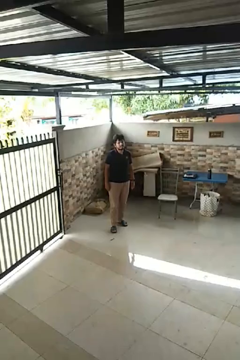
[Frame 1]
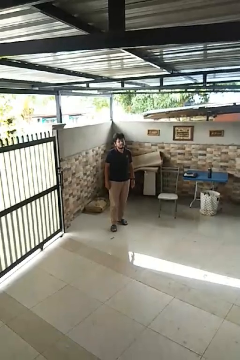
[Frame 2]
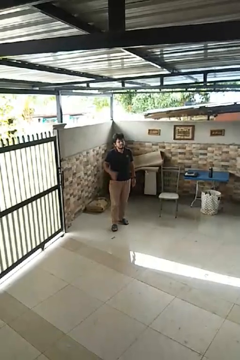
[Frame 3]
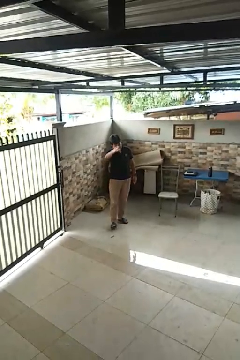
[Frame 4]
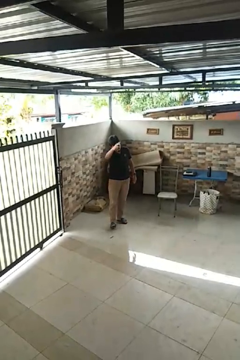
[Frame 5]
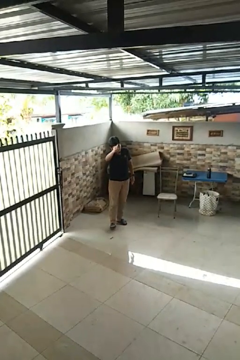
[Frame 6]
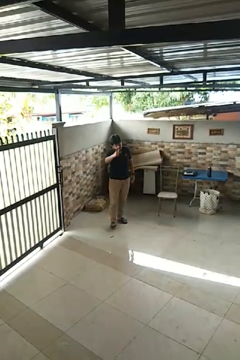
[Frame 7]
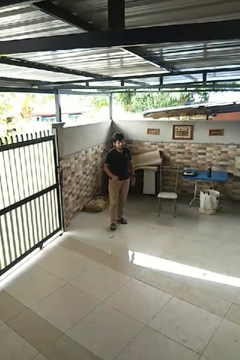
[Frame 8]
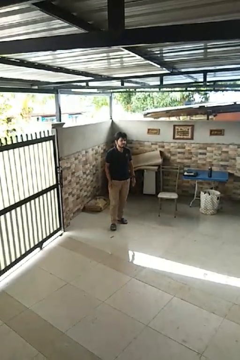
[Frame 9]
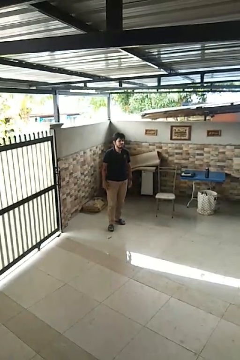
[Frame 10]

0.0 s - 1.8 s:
person gestures come here

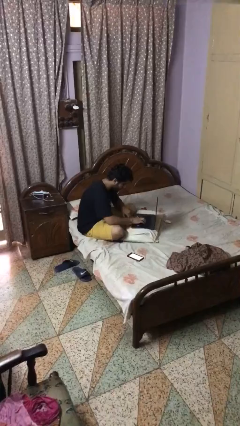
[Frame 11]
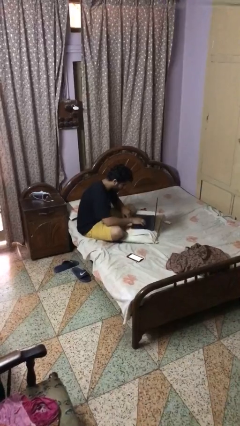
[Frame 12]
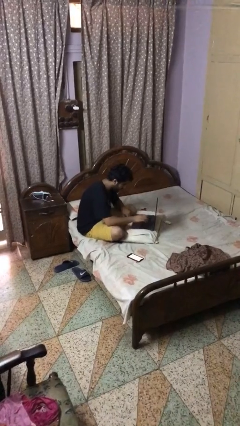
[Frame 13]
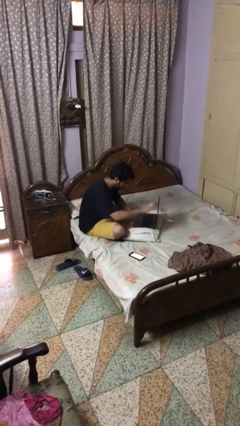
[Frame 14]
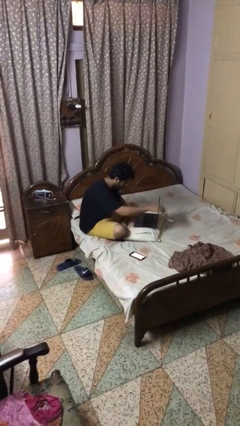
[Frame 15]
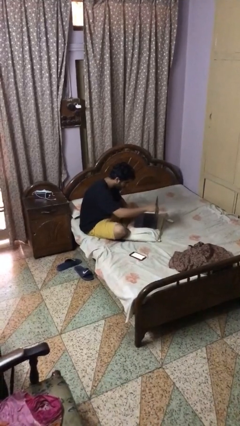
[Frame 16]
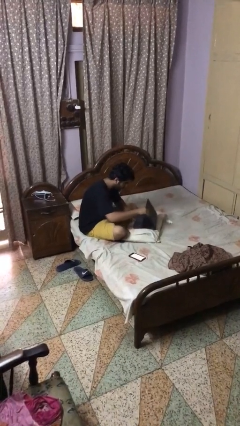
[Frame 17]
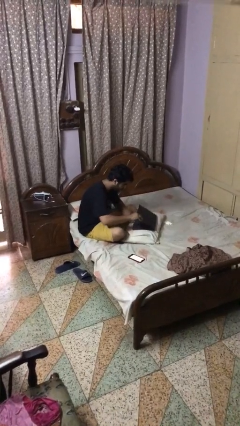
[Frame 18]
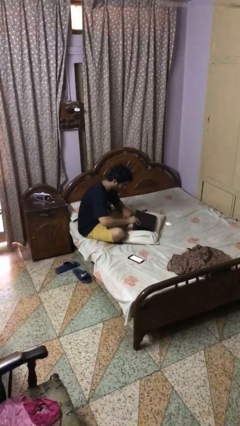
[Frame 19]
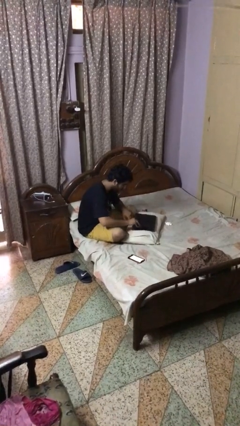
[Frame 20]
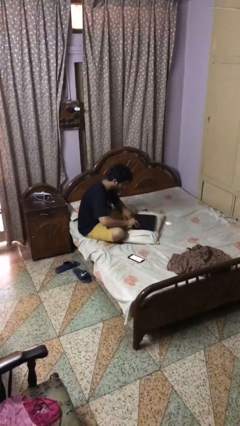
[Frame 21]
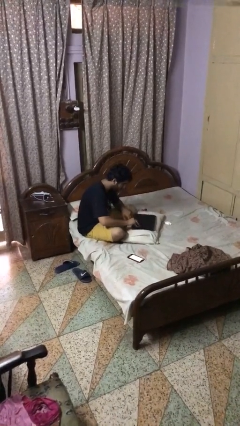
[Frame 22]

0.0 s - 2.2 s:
person closes laptop

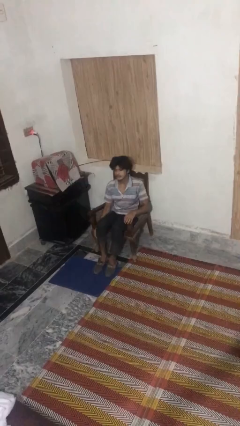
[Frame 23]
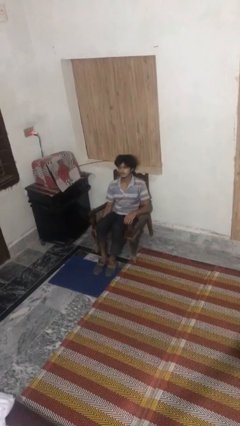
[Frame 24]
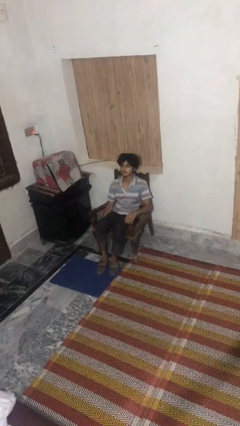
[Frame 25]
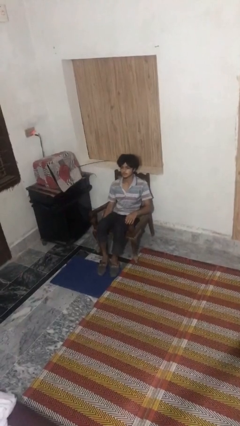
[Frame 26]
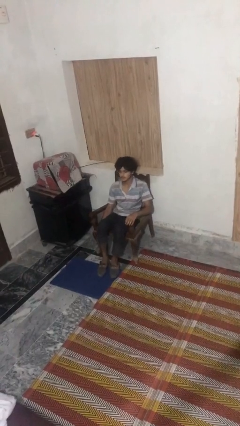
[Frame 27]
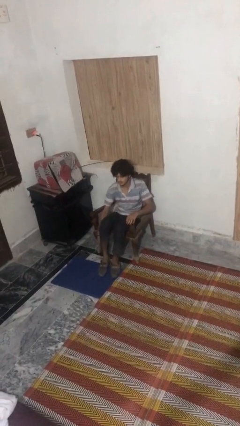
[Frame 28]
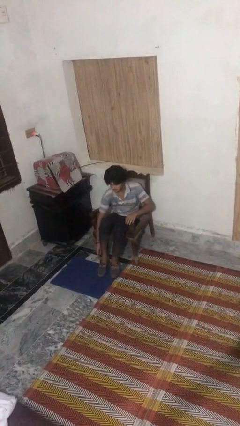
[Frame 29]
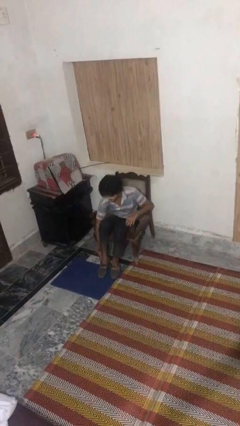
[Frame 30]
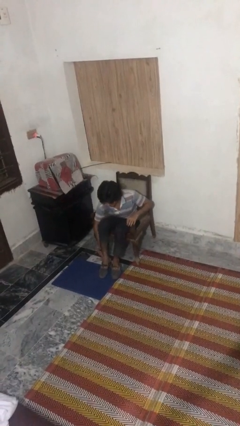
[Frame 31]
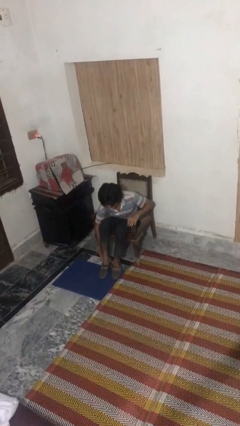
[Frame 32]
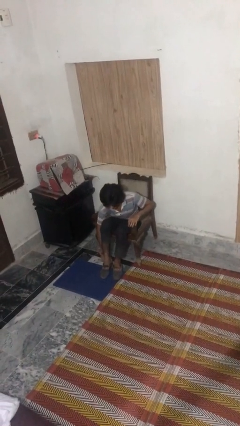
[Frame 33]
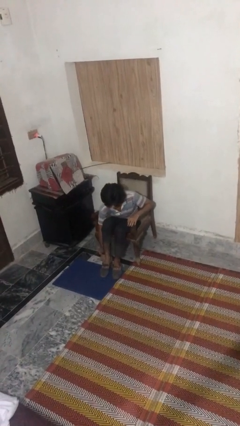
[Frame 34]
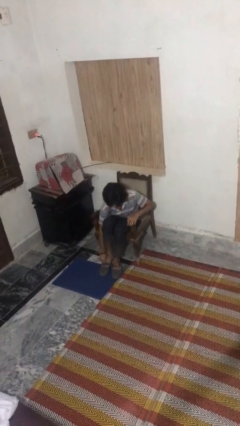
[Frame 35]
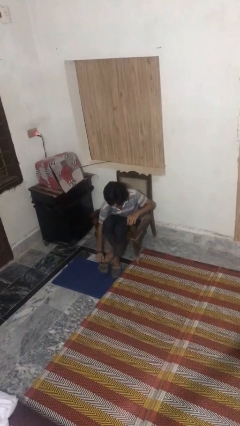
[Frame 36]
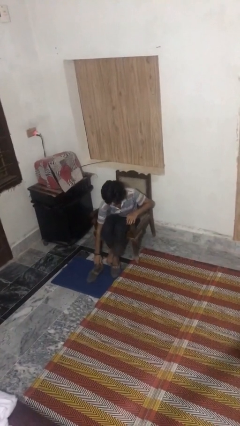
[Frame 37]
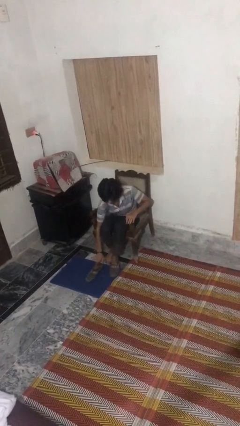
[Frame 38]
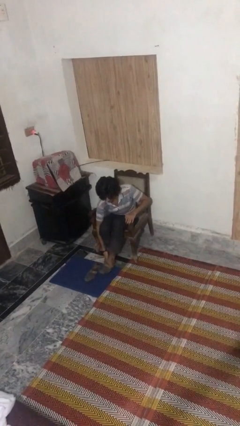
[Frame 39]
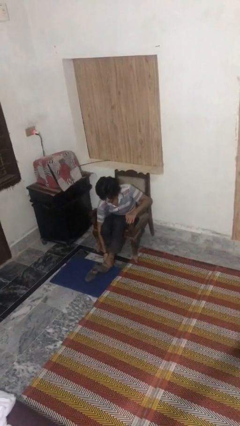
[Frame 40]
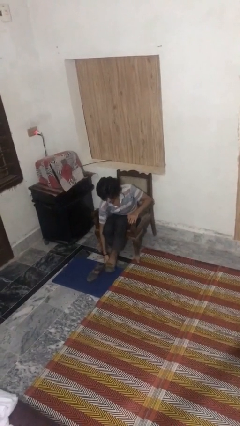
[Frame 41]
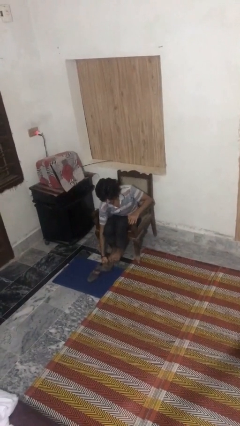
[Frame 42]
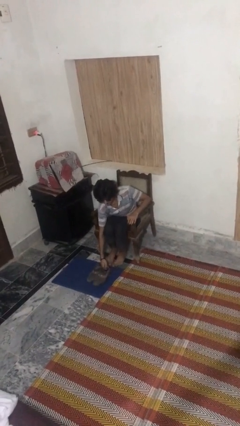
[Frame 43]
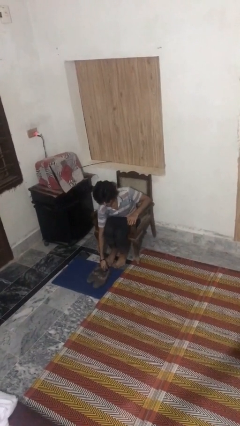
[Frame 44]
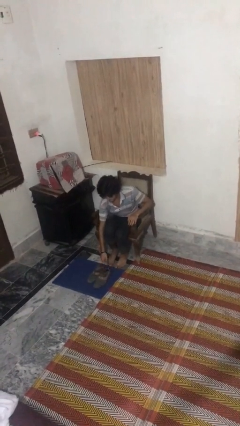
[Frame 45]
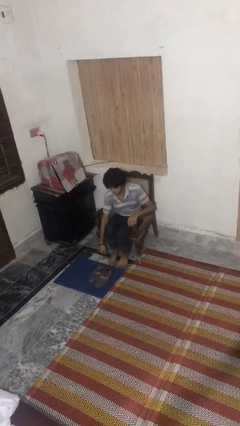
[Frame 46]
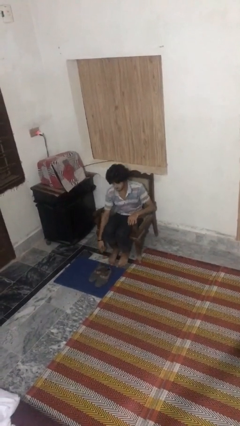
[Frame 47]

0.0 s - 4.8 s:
person takes off shoes

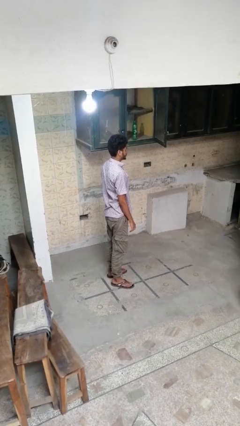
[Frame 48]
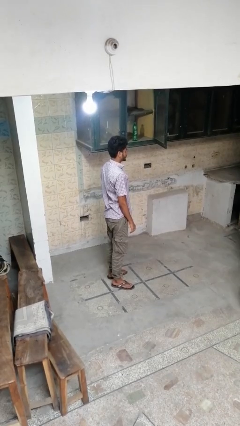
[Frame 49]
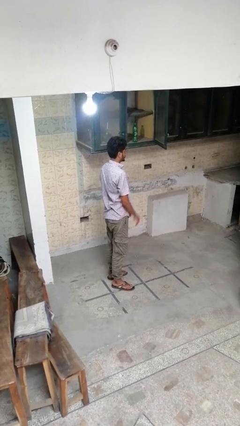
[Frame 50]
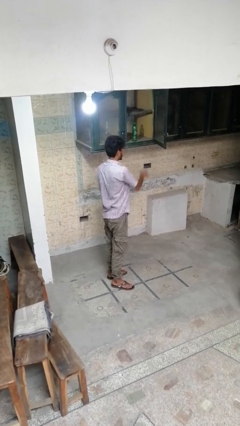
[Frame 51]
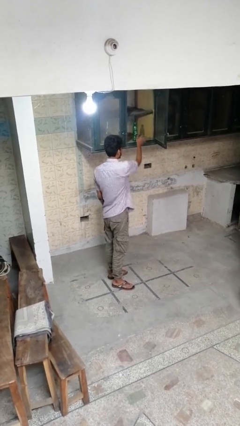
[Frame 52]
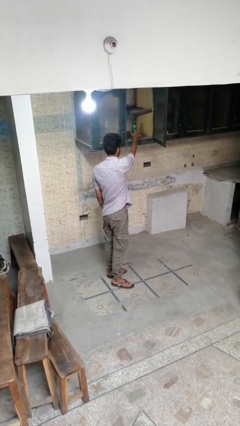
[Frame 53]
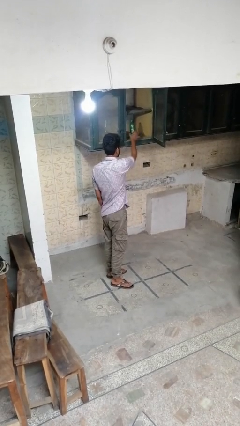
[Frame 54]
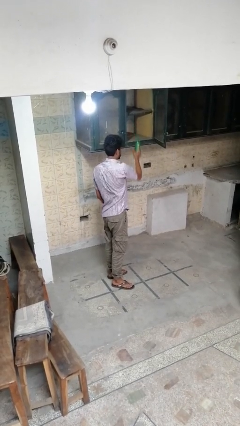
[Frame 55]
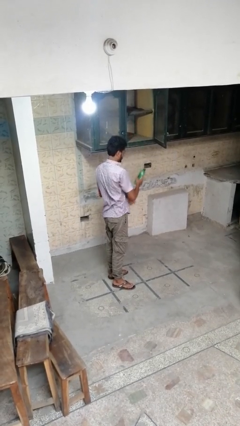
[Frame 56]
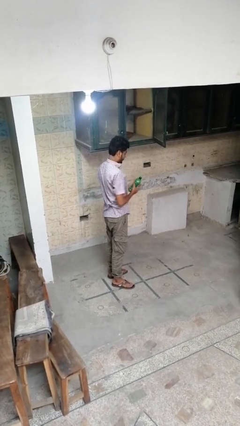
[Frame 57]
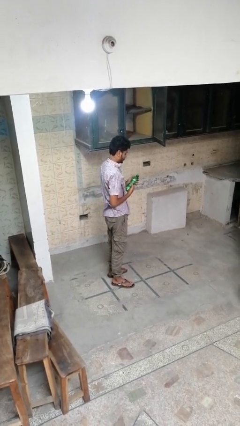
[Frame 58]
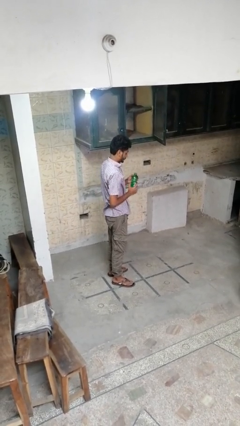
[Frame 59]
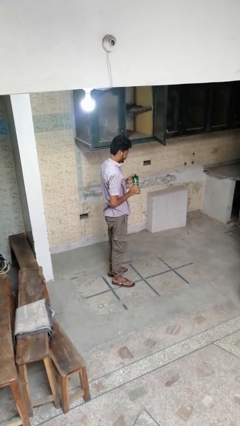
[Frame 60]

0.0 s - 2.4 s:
person picks up object from cabinet

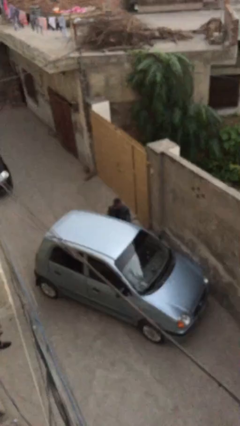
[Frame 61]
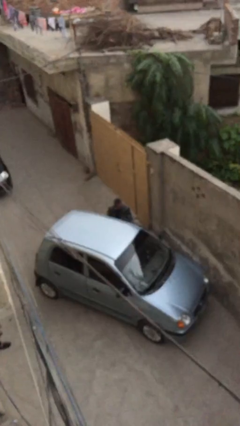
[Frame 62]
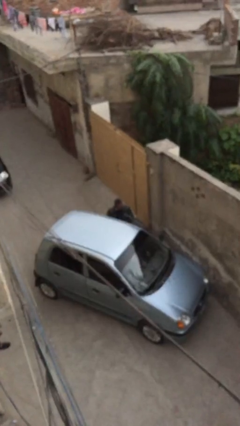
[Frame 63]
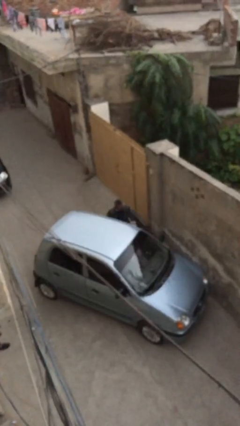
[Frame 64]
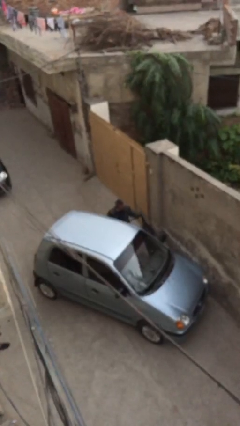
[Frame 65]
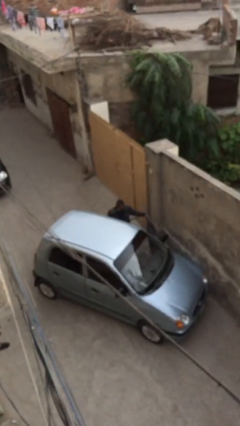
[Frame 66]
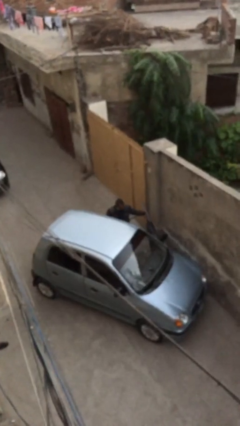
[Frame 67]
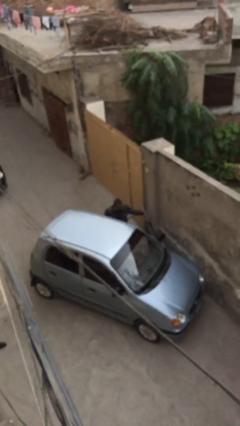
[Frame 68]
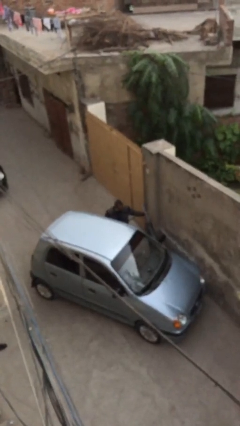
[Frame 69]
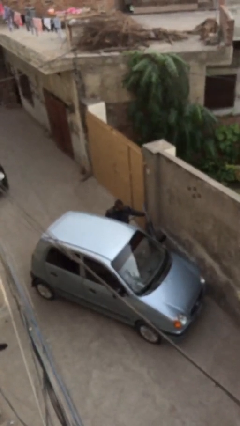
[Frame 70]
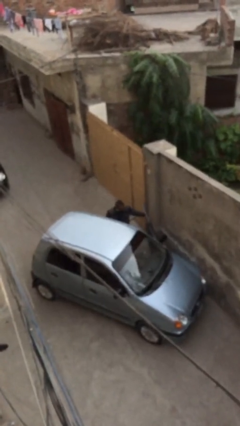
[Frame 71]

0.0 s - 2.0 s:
person opens car door

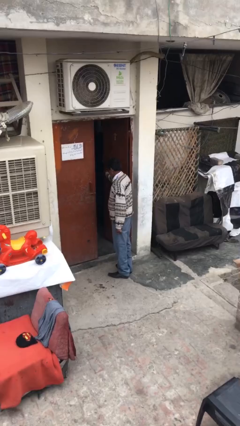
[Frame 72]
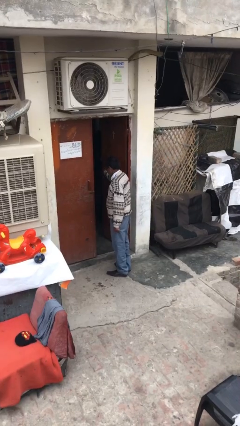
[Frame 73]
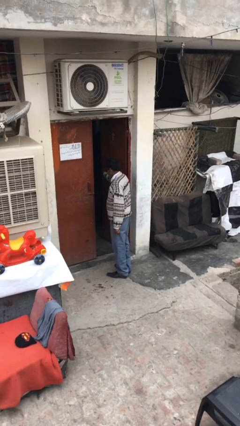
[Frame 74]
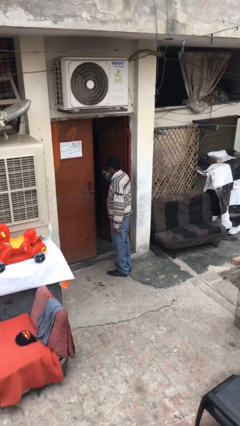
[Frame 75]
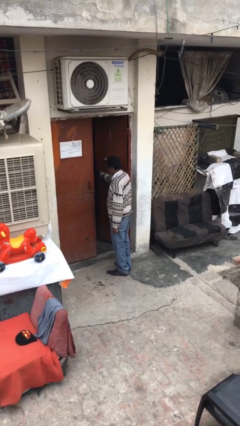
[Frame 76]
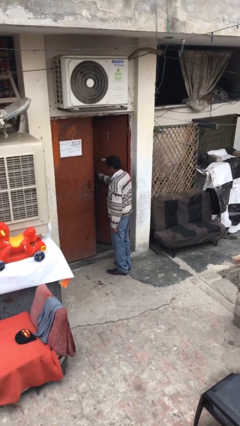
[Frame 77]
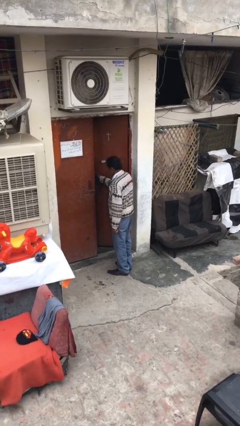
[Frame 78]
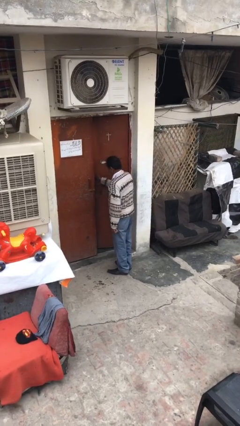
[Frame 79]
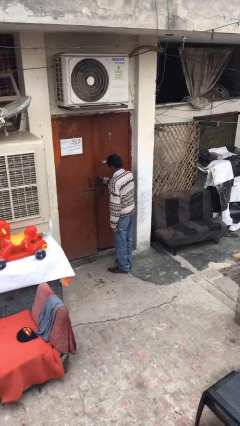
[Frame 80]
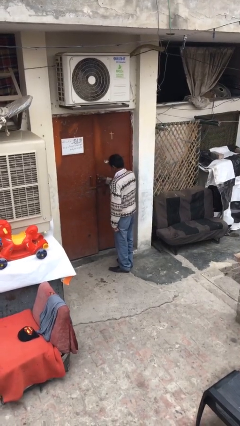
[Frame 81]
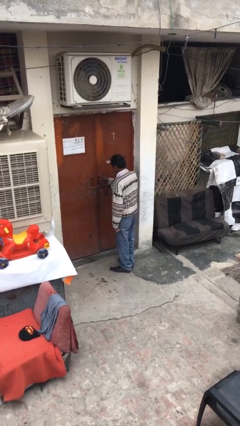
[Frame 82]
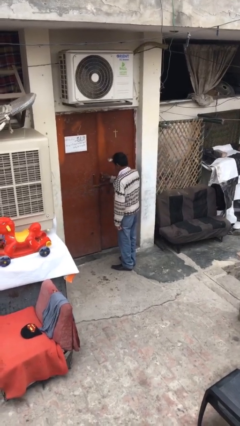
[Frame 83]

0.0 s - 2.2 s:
person closes facility door

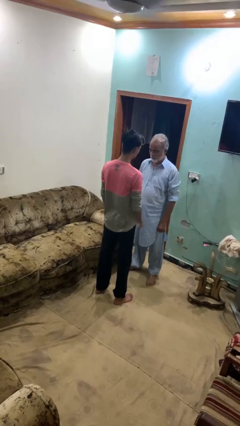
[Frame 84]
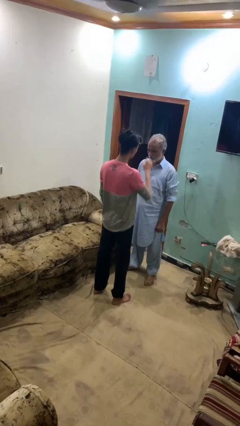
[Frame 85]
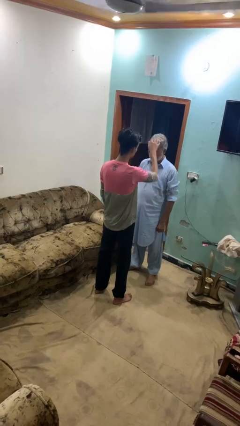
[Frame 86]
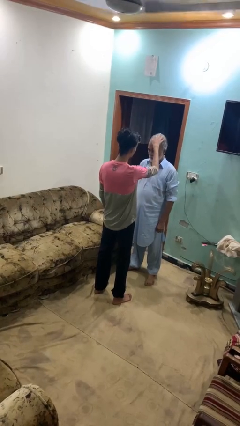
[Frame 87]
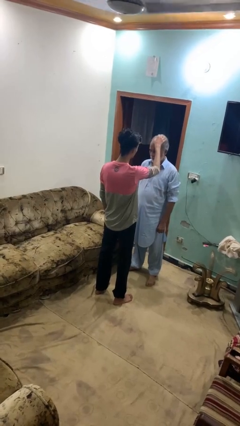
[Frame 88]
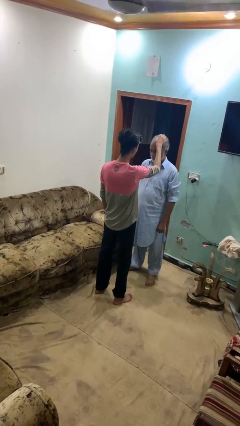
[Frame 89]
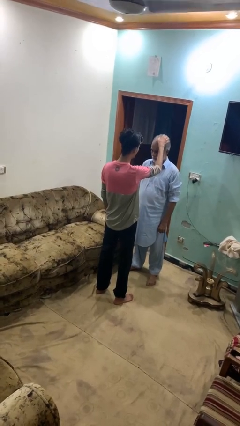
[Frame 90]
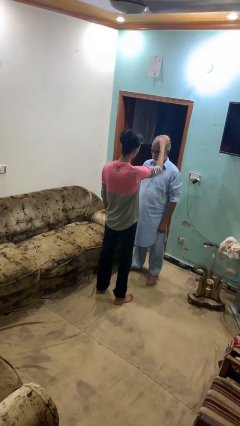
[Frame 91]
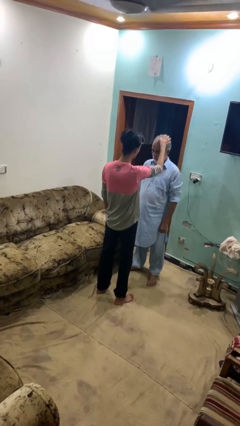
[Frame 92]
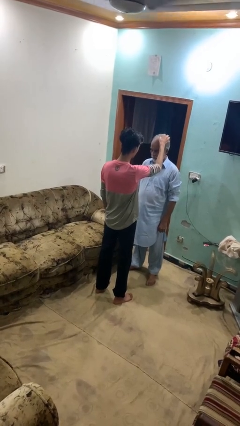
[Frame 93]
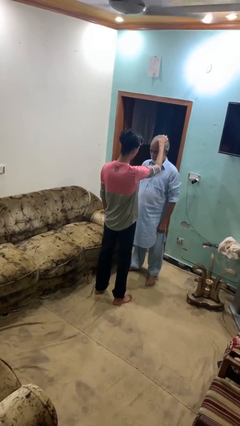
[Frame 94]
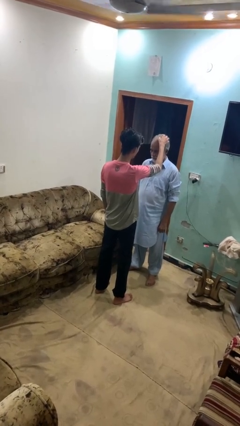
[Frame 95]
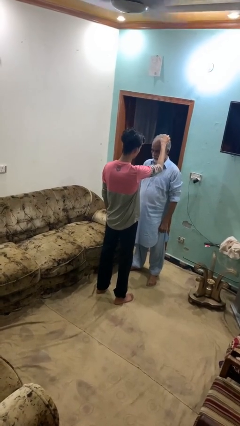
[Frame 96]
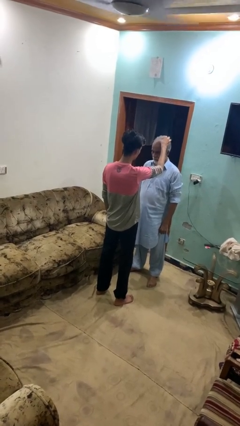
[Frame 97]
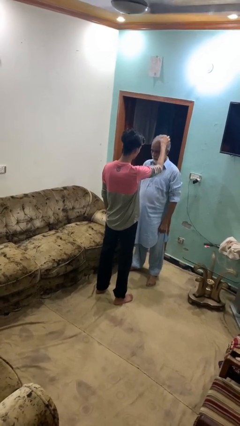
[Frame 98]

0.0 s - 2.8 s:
person grabs person by hair
